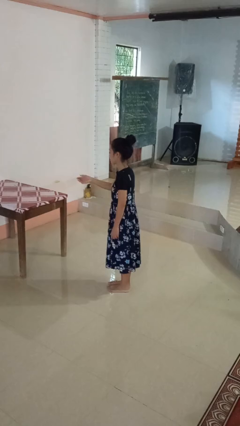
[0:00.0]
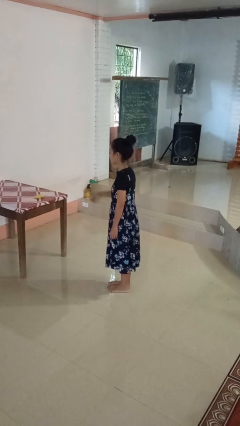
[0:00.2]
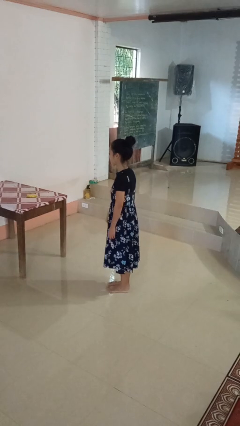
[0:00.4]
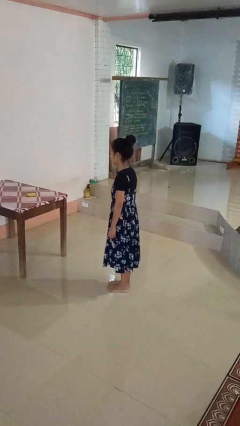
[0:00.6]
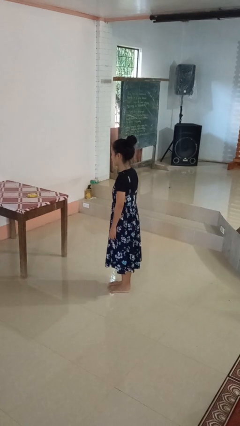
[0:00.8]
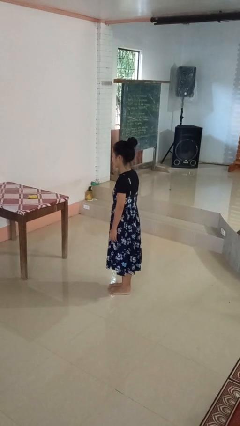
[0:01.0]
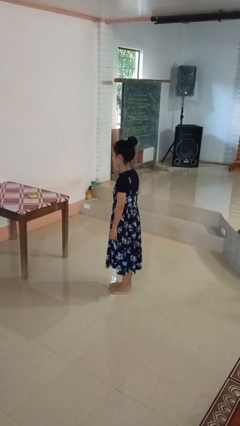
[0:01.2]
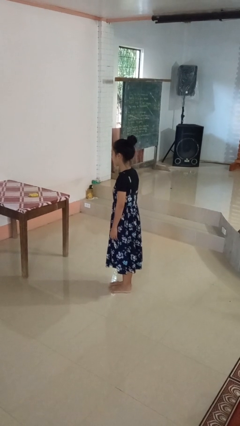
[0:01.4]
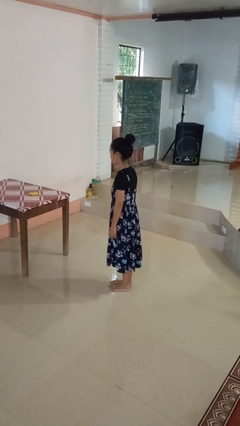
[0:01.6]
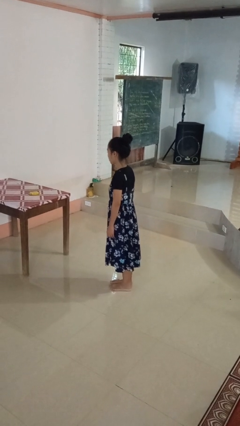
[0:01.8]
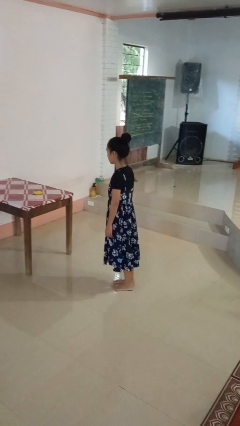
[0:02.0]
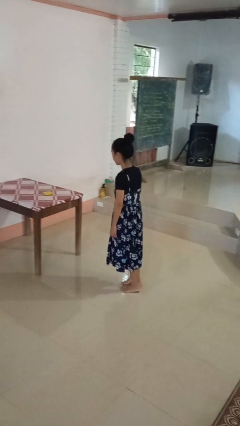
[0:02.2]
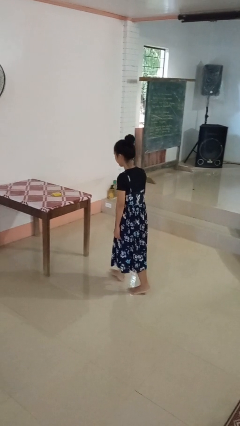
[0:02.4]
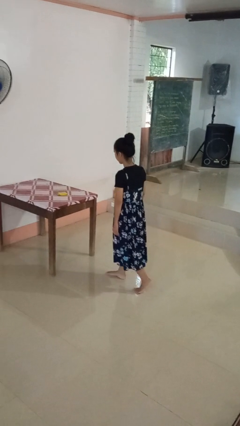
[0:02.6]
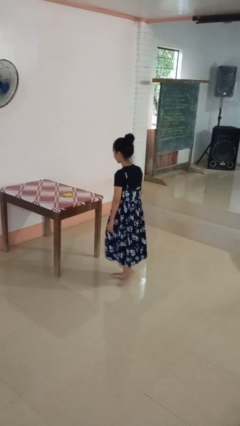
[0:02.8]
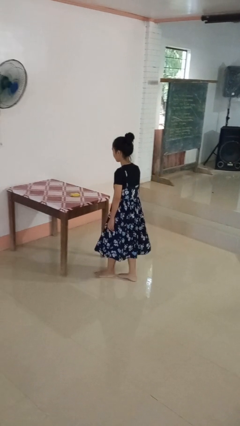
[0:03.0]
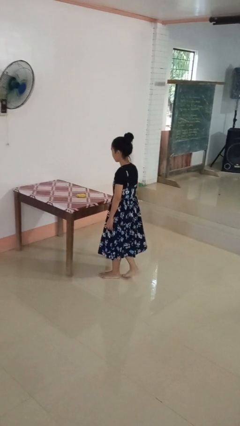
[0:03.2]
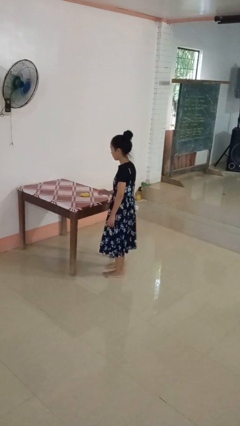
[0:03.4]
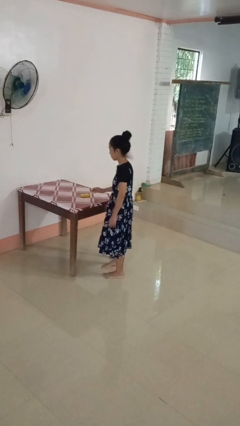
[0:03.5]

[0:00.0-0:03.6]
person throws object on table

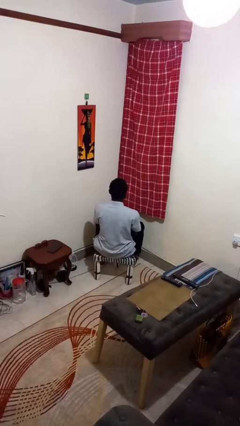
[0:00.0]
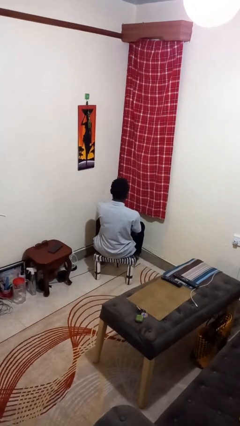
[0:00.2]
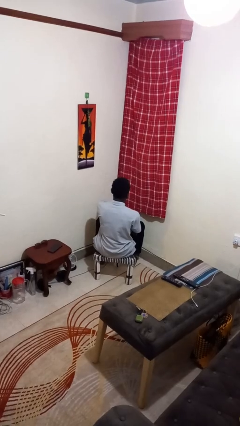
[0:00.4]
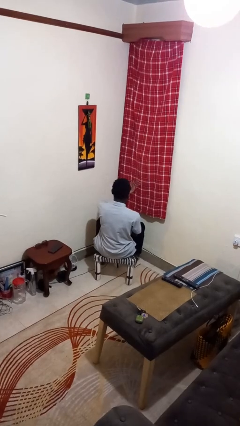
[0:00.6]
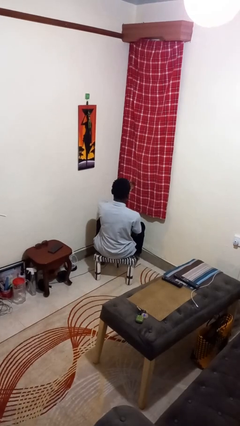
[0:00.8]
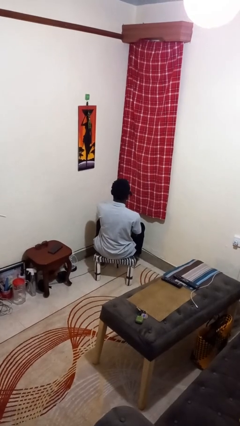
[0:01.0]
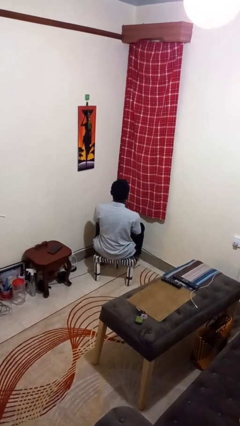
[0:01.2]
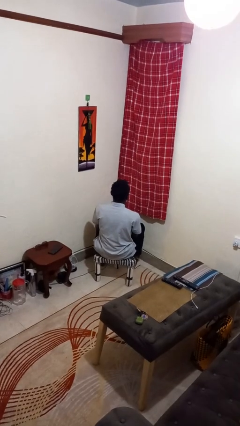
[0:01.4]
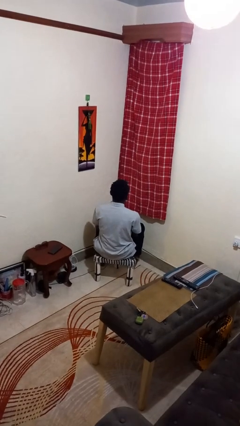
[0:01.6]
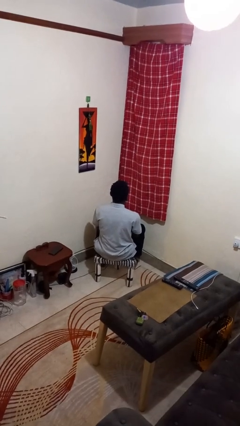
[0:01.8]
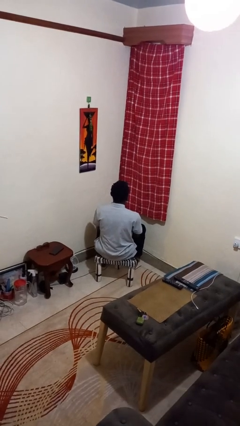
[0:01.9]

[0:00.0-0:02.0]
person gestures swipe right

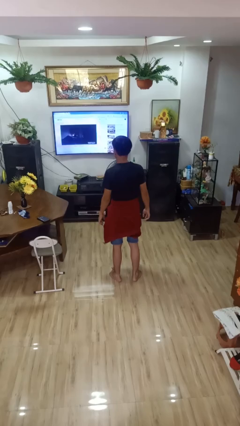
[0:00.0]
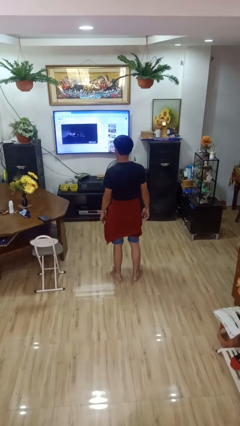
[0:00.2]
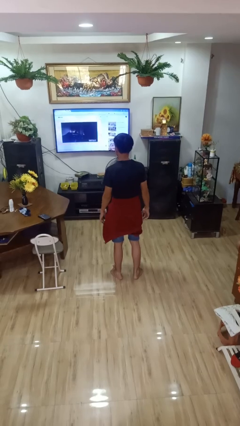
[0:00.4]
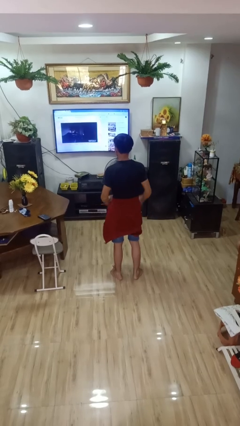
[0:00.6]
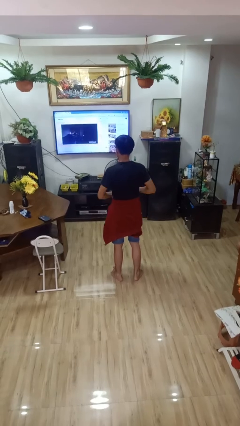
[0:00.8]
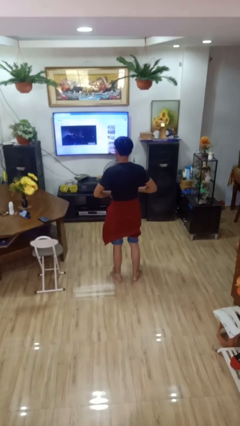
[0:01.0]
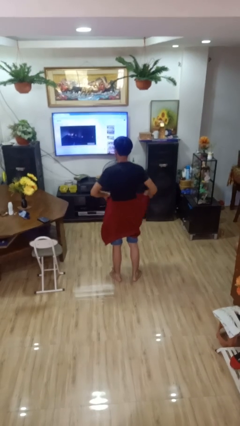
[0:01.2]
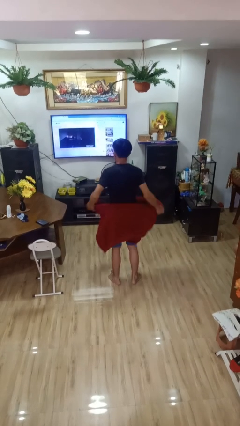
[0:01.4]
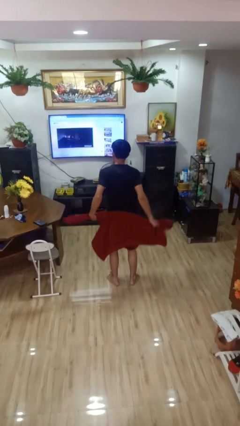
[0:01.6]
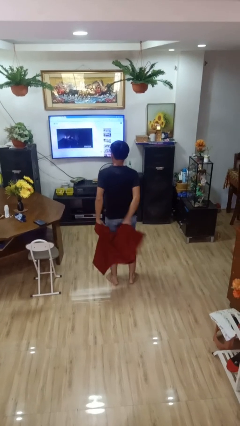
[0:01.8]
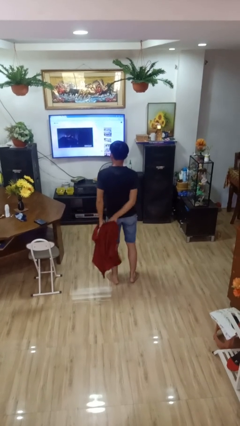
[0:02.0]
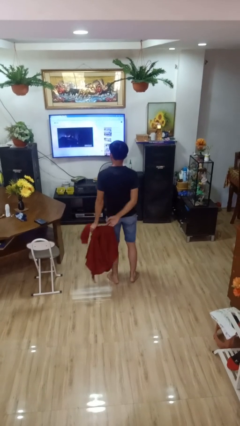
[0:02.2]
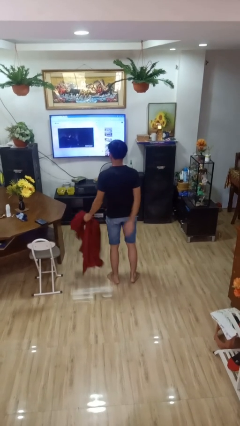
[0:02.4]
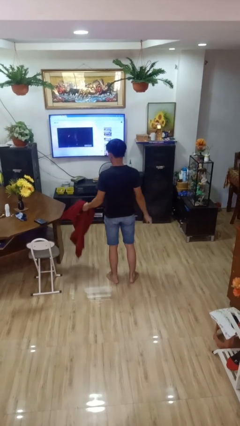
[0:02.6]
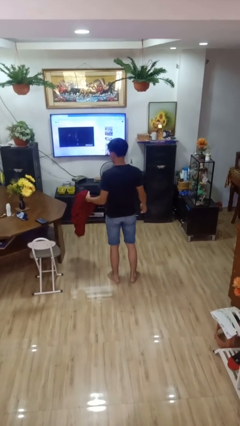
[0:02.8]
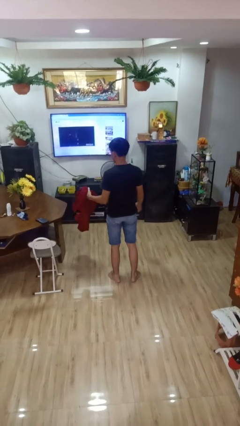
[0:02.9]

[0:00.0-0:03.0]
person unties jacket around waist

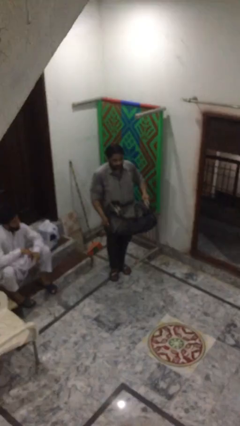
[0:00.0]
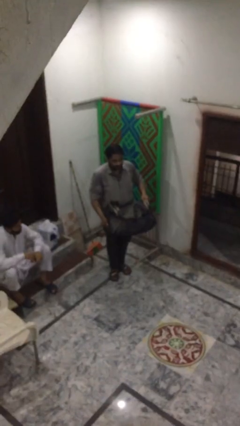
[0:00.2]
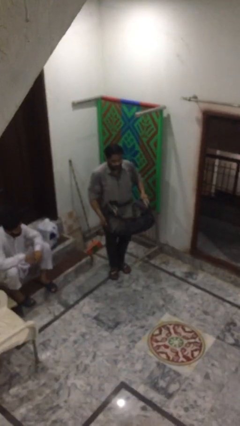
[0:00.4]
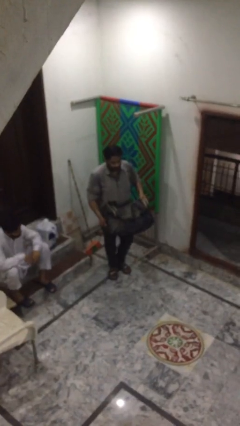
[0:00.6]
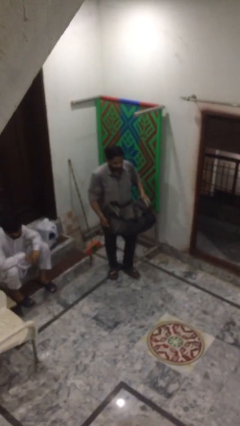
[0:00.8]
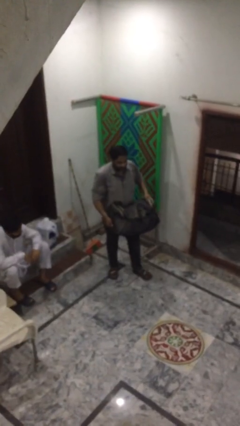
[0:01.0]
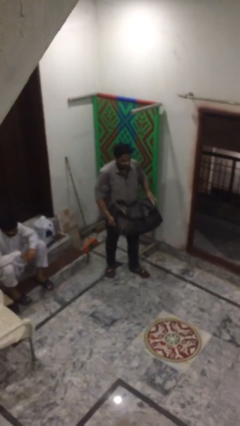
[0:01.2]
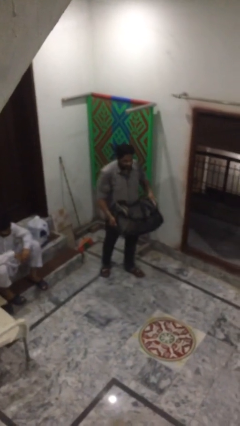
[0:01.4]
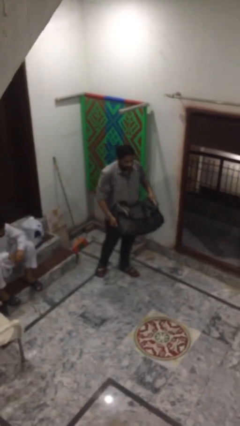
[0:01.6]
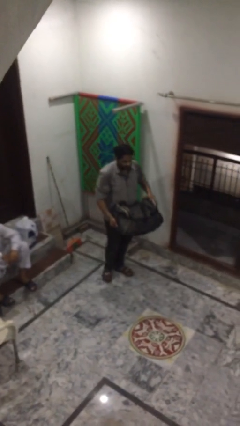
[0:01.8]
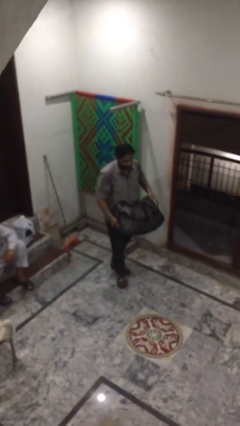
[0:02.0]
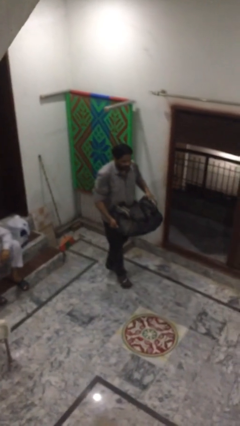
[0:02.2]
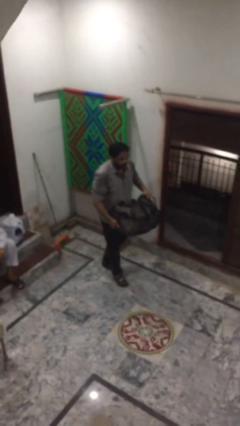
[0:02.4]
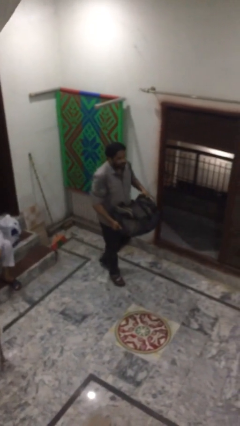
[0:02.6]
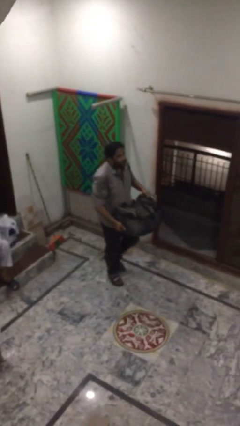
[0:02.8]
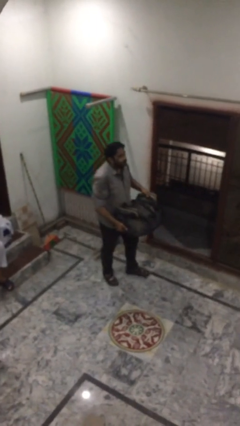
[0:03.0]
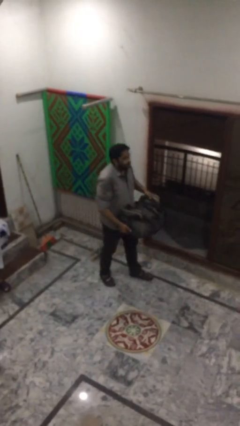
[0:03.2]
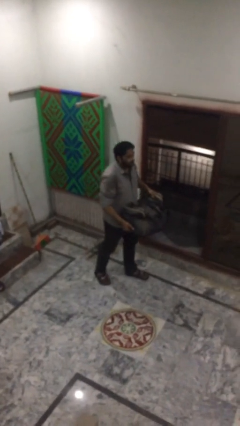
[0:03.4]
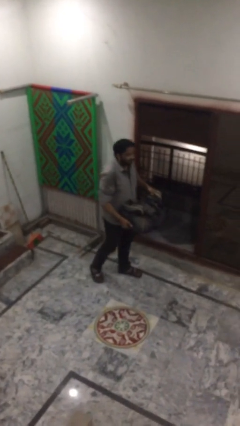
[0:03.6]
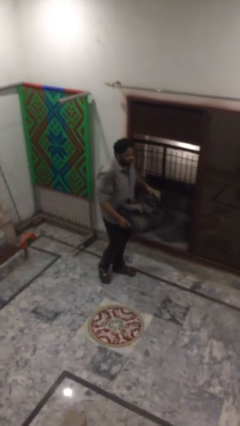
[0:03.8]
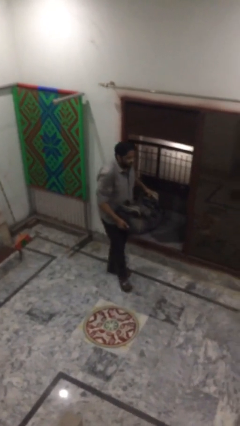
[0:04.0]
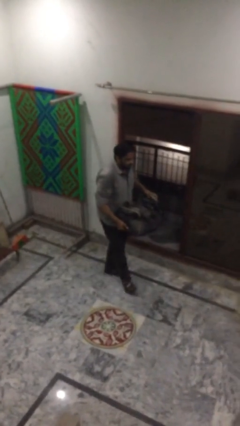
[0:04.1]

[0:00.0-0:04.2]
person carries heavy object

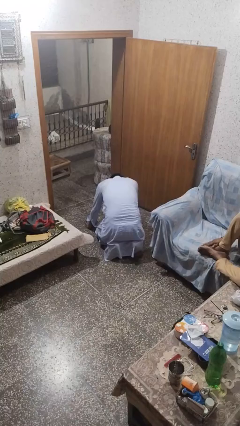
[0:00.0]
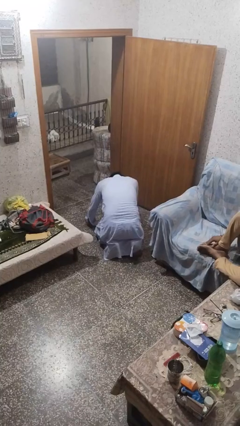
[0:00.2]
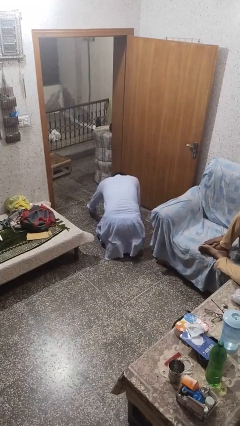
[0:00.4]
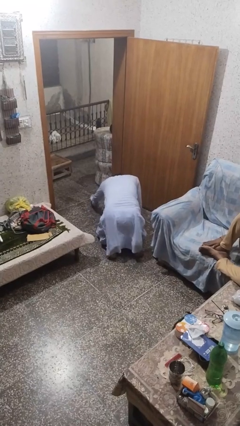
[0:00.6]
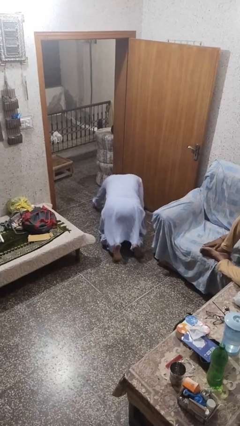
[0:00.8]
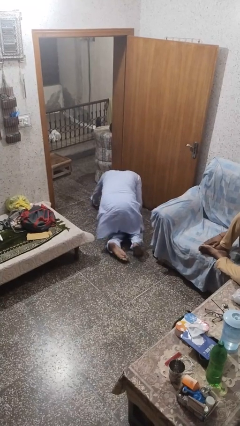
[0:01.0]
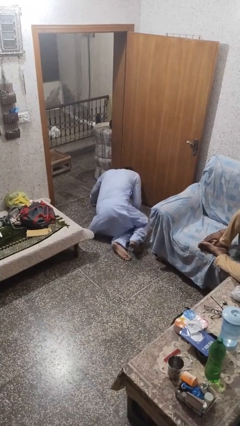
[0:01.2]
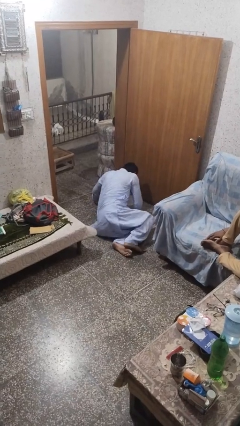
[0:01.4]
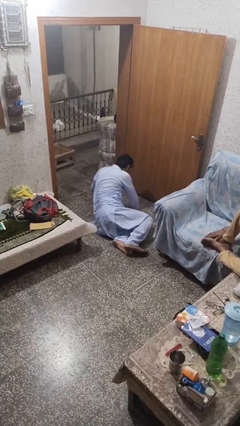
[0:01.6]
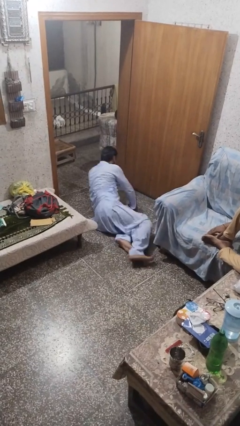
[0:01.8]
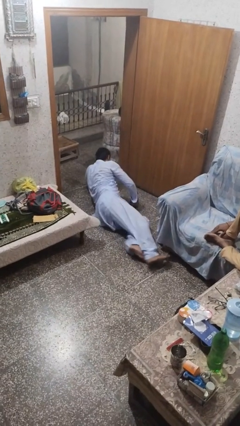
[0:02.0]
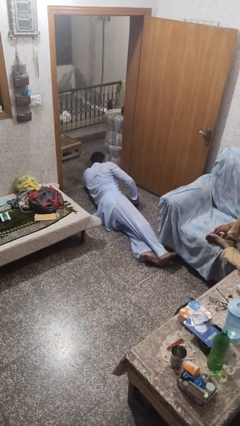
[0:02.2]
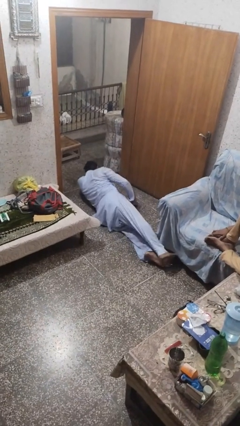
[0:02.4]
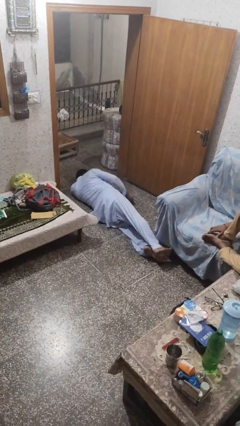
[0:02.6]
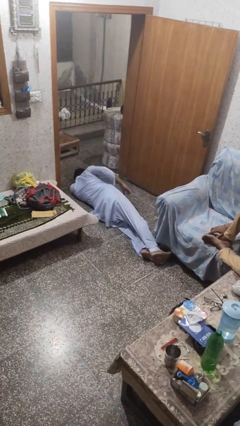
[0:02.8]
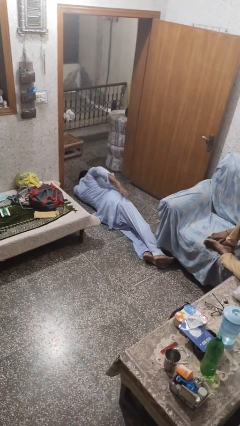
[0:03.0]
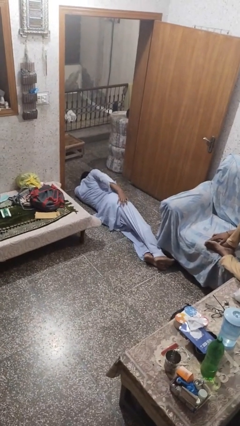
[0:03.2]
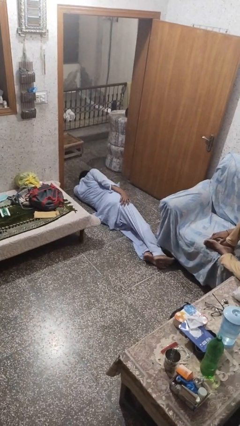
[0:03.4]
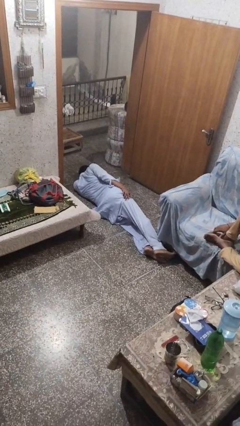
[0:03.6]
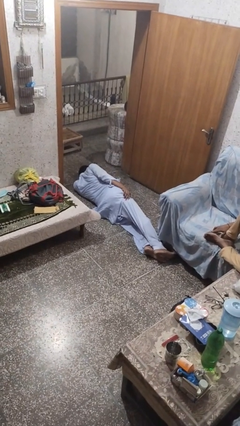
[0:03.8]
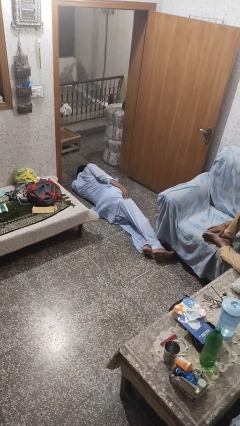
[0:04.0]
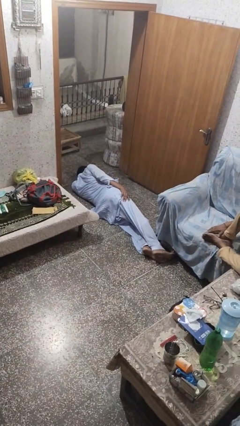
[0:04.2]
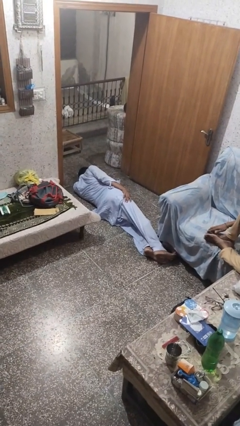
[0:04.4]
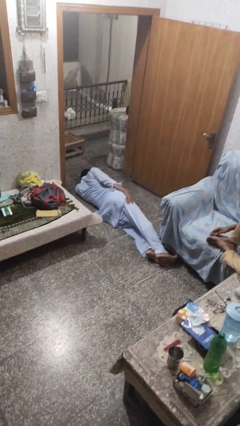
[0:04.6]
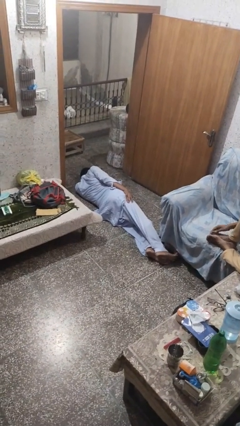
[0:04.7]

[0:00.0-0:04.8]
person lies down on floor
